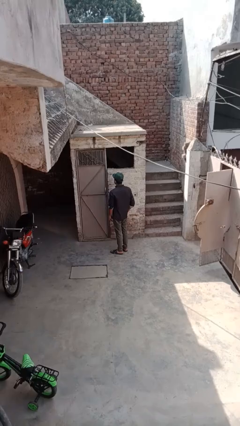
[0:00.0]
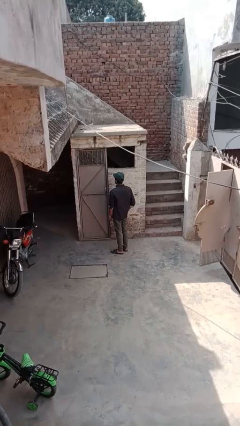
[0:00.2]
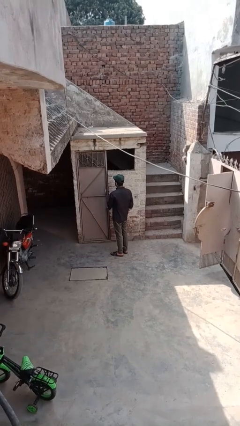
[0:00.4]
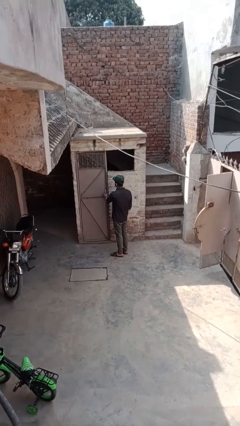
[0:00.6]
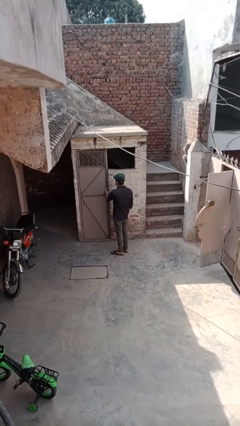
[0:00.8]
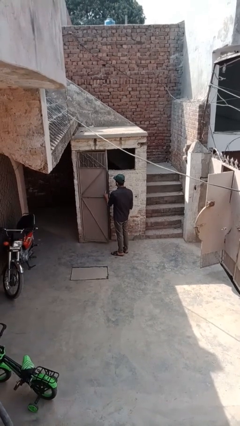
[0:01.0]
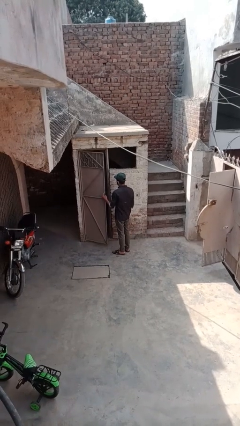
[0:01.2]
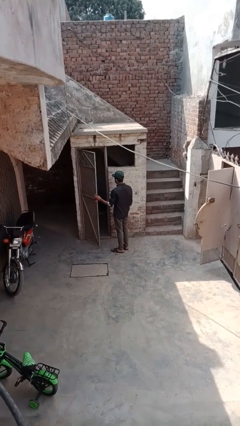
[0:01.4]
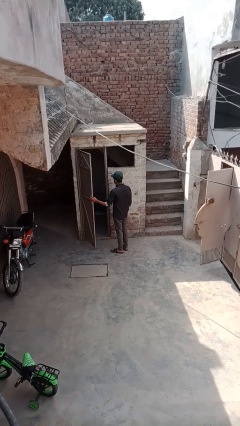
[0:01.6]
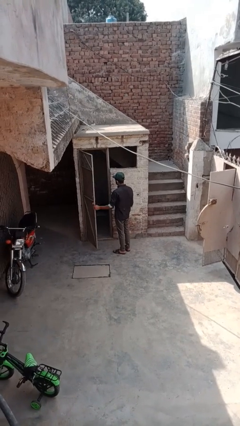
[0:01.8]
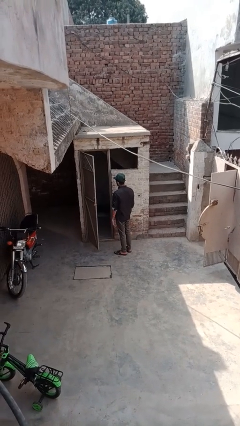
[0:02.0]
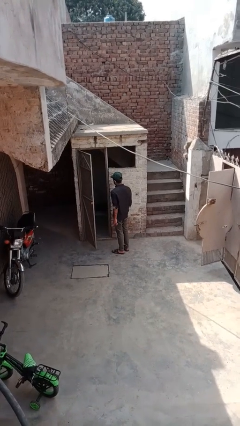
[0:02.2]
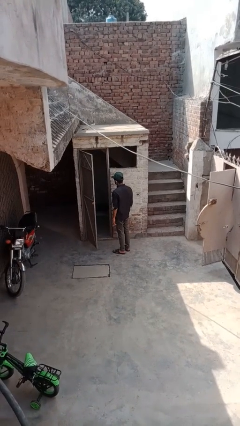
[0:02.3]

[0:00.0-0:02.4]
person opens facility door

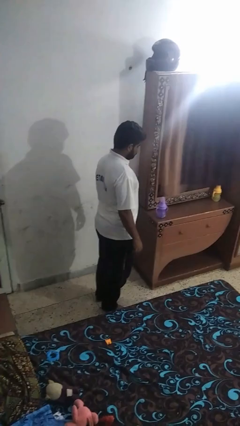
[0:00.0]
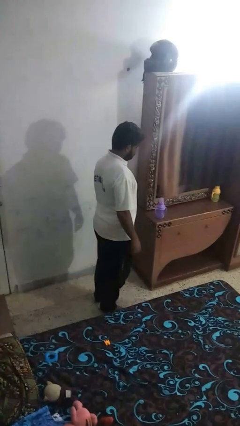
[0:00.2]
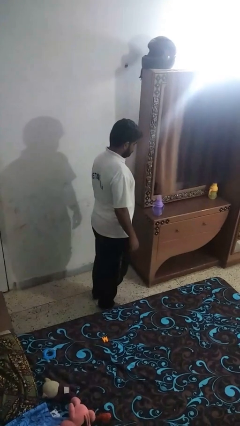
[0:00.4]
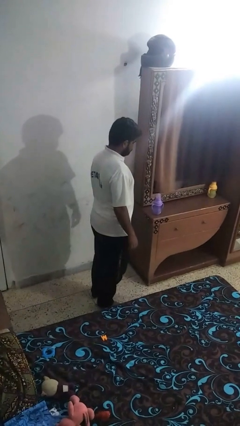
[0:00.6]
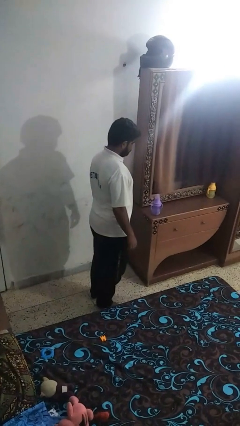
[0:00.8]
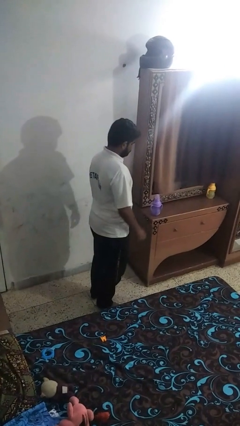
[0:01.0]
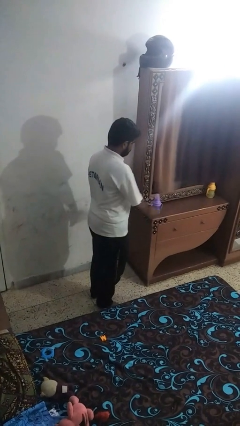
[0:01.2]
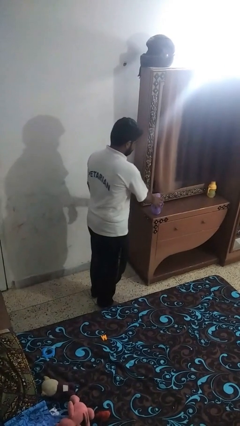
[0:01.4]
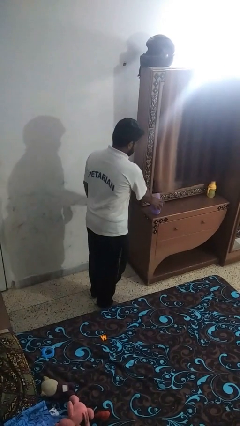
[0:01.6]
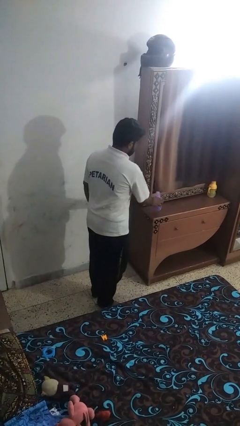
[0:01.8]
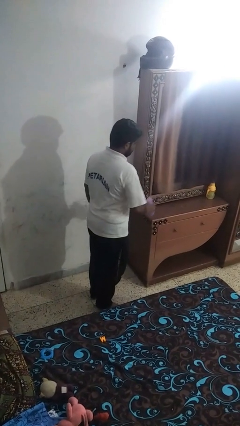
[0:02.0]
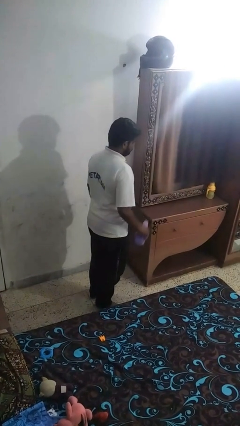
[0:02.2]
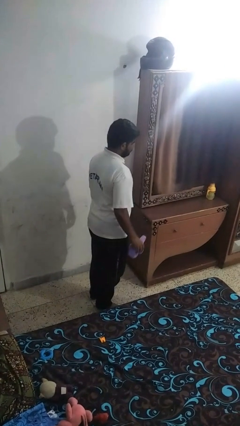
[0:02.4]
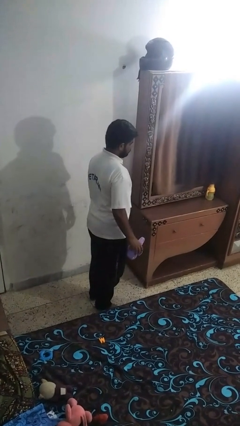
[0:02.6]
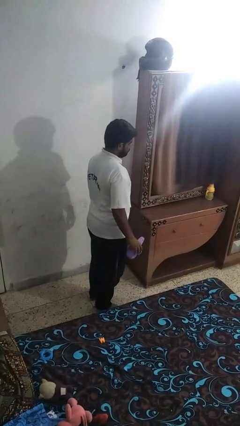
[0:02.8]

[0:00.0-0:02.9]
person picks up object from countertop

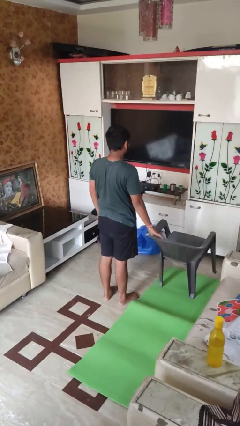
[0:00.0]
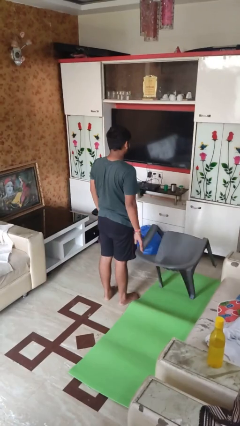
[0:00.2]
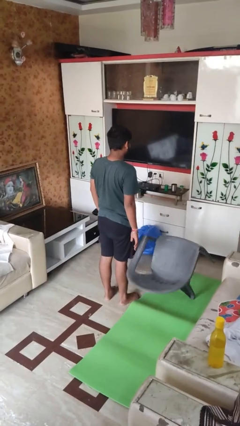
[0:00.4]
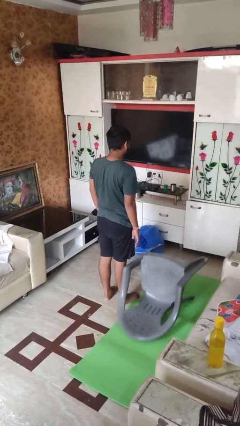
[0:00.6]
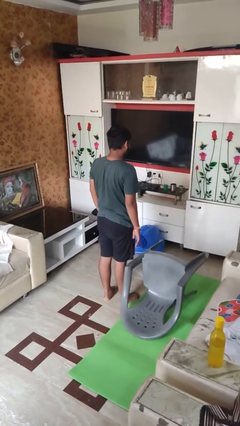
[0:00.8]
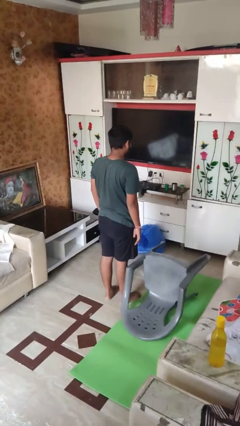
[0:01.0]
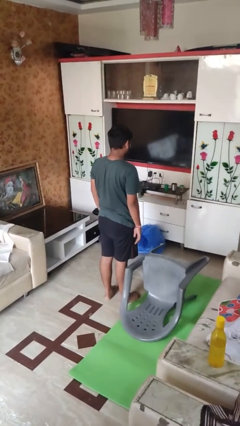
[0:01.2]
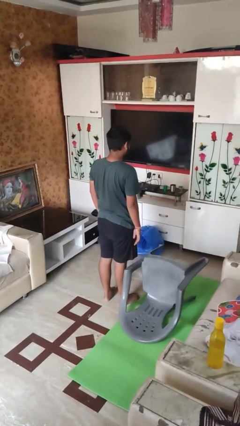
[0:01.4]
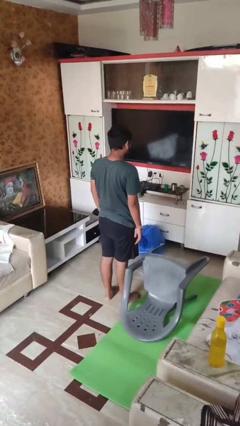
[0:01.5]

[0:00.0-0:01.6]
person knocks over furniture

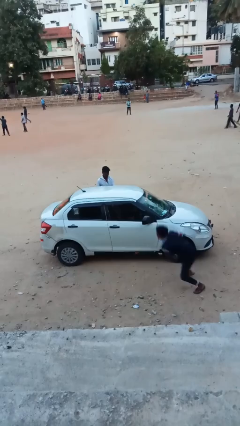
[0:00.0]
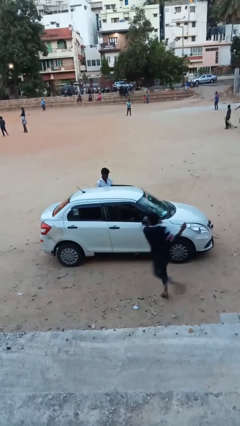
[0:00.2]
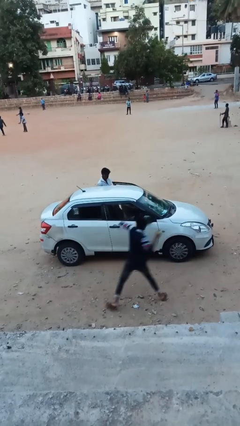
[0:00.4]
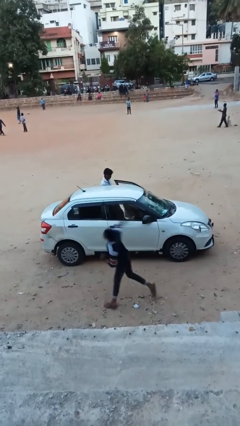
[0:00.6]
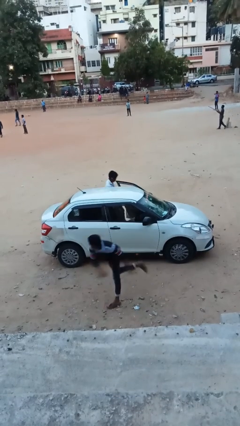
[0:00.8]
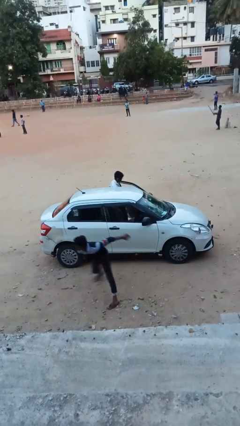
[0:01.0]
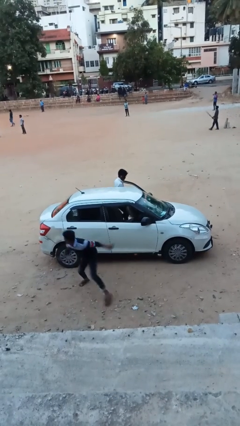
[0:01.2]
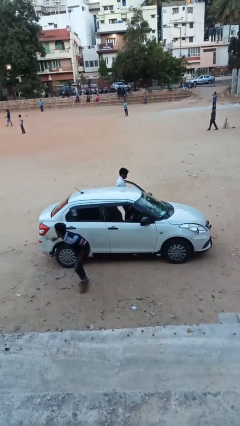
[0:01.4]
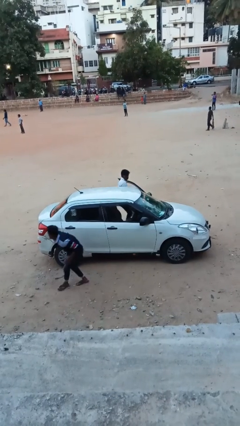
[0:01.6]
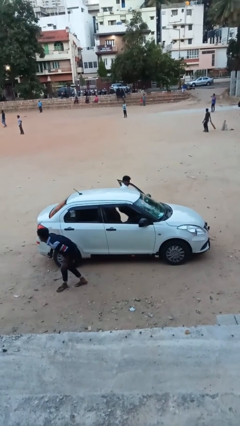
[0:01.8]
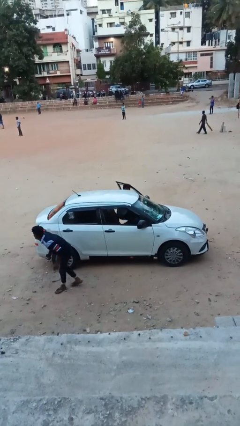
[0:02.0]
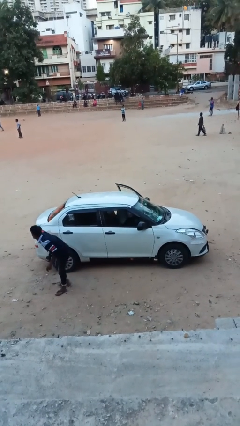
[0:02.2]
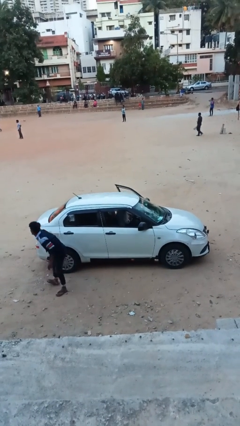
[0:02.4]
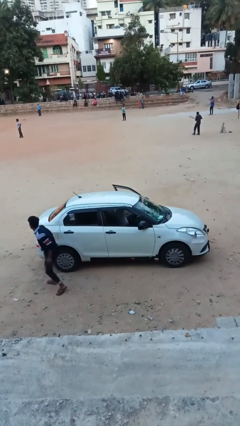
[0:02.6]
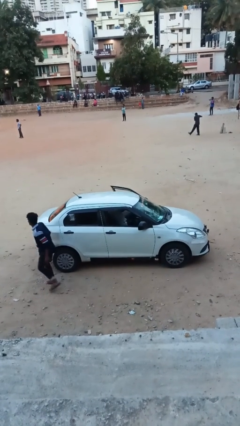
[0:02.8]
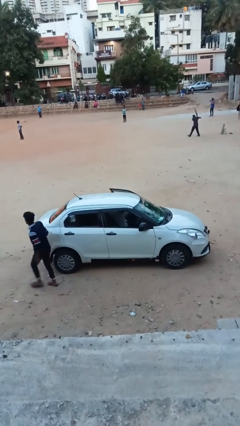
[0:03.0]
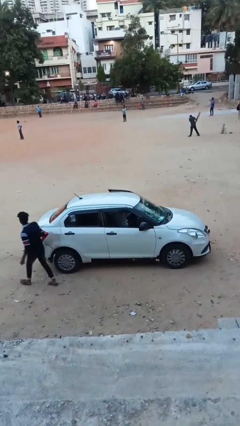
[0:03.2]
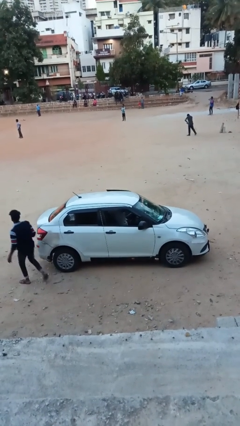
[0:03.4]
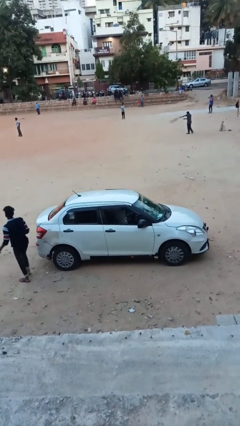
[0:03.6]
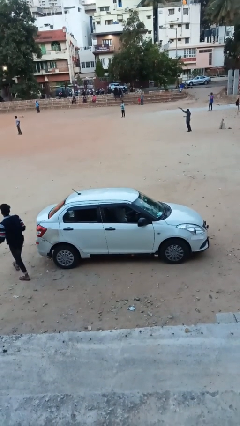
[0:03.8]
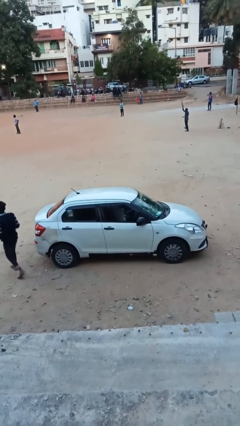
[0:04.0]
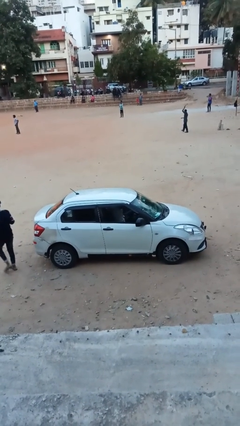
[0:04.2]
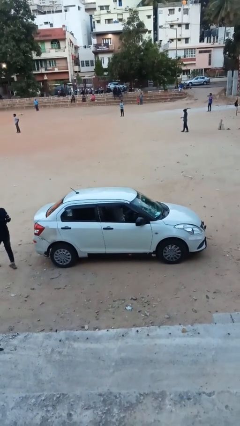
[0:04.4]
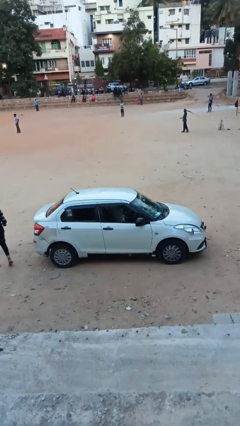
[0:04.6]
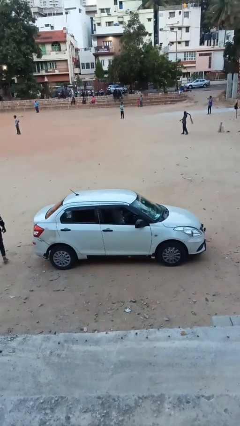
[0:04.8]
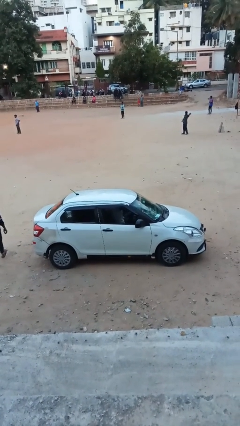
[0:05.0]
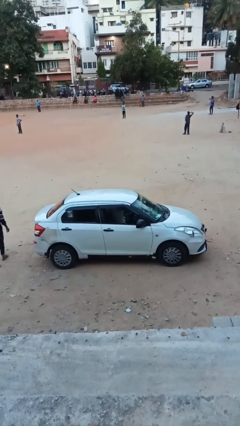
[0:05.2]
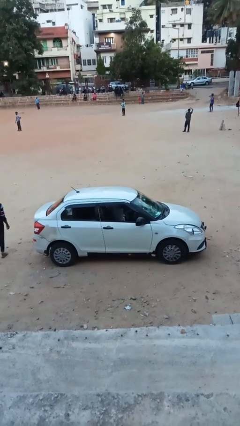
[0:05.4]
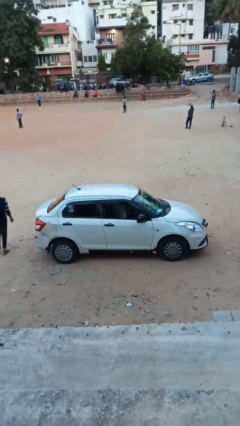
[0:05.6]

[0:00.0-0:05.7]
car picks up person

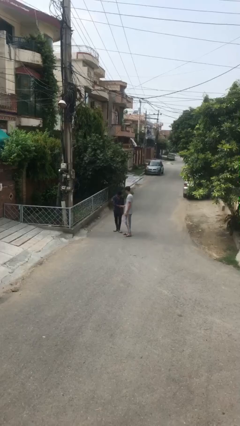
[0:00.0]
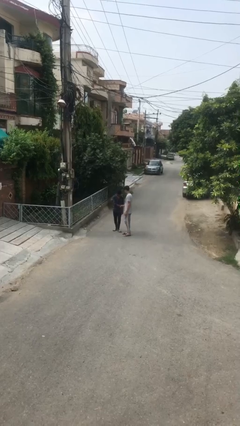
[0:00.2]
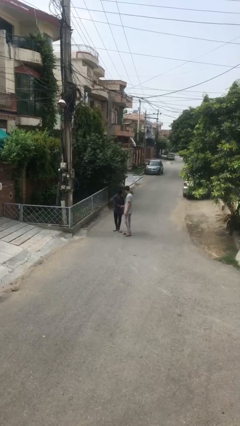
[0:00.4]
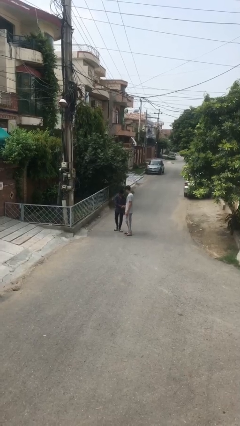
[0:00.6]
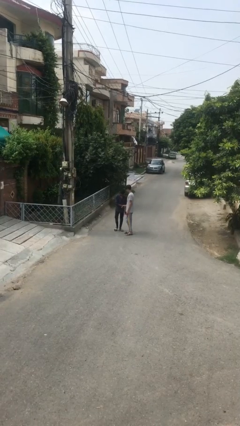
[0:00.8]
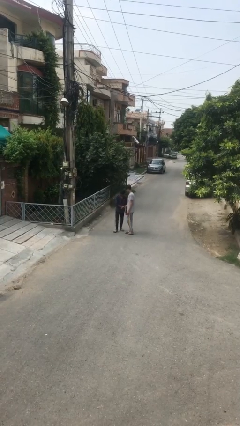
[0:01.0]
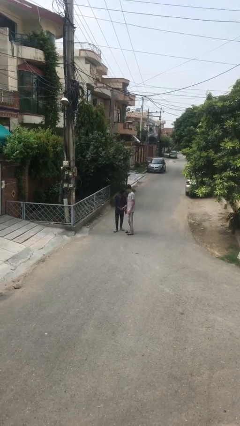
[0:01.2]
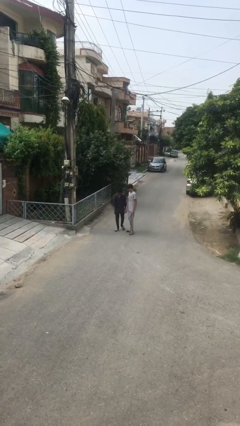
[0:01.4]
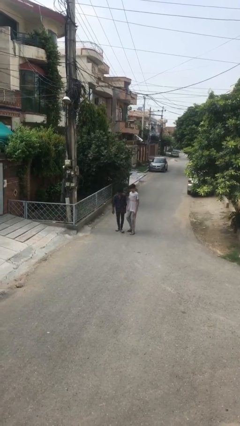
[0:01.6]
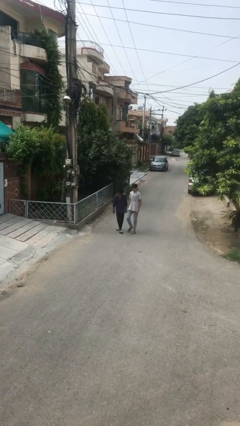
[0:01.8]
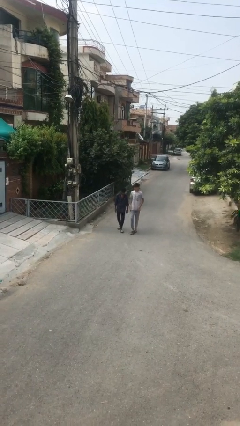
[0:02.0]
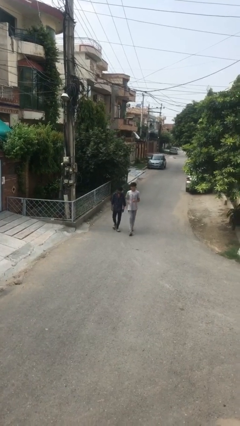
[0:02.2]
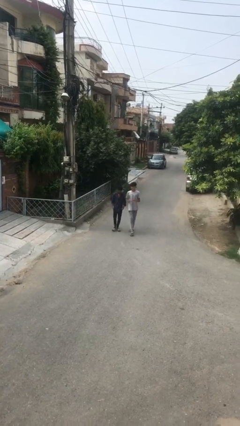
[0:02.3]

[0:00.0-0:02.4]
person shakes hand

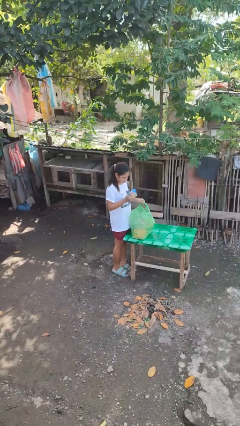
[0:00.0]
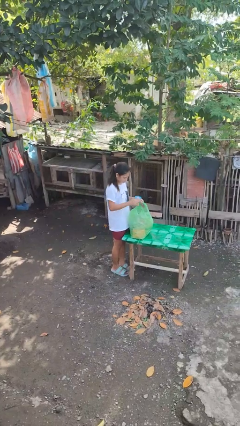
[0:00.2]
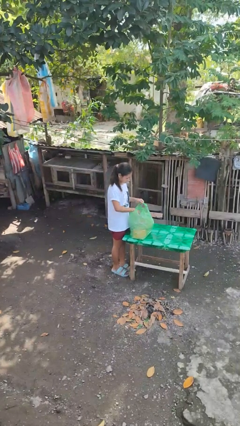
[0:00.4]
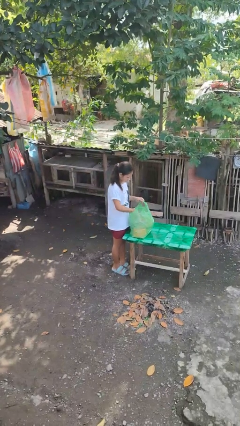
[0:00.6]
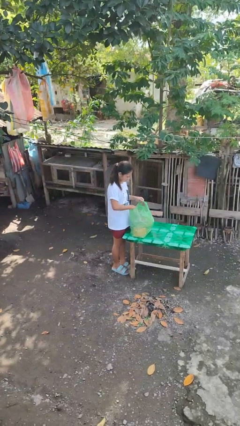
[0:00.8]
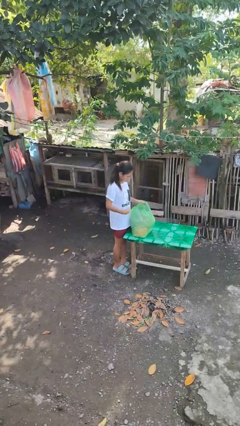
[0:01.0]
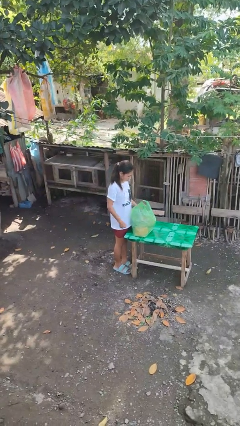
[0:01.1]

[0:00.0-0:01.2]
person puts object into bag

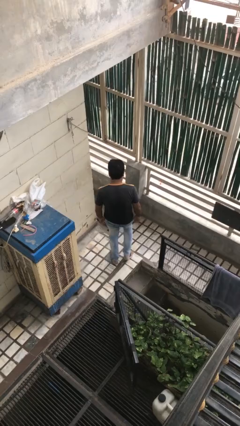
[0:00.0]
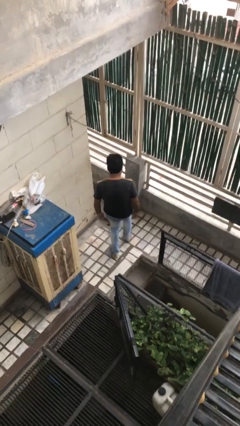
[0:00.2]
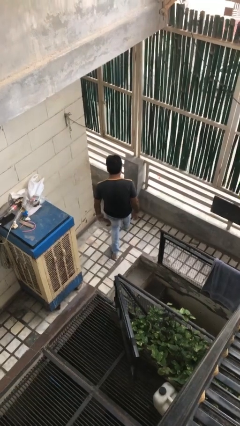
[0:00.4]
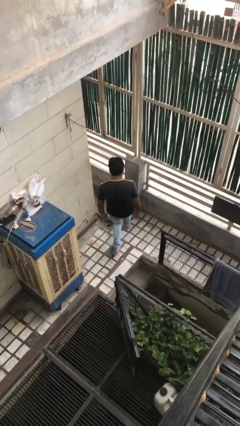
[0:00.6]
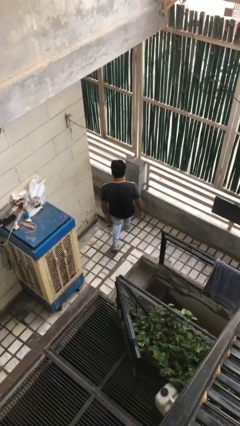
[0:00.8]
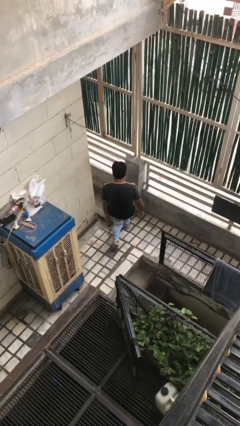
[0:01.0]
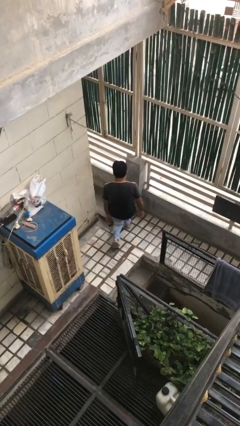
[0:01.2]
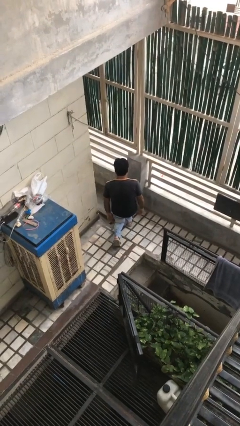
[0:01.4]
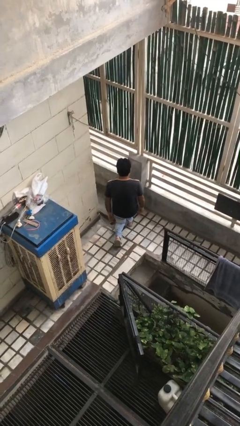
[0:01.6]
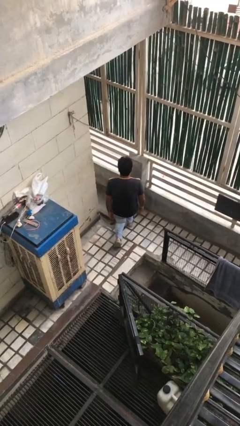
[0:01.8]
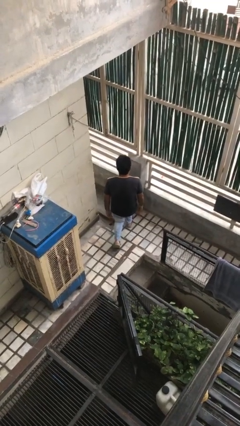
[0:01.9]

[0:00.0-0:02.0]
person kneels
